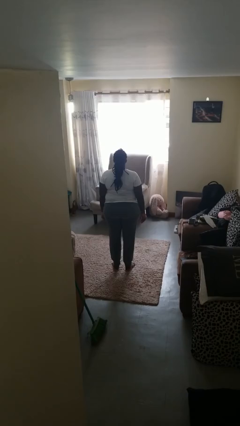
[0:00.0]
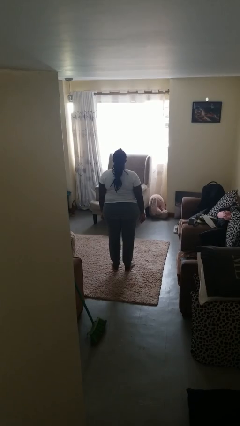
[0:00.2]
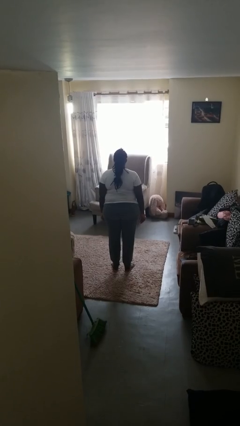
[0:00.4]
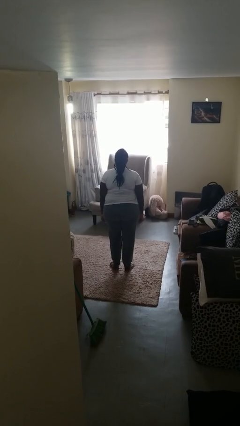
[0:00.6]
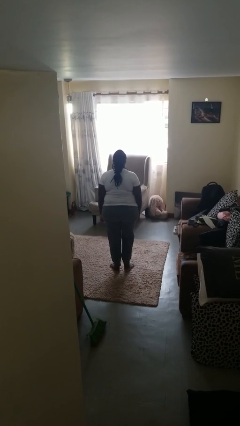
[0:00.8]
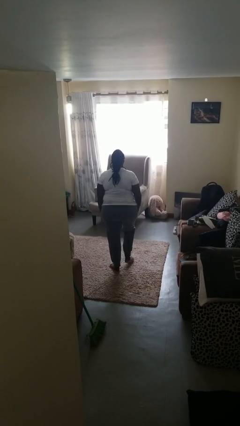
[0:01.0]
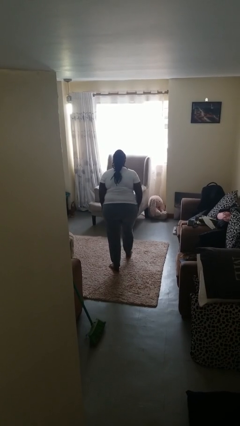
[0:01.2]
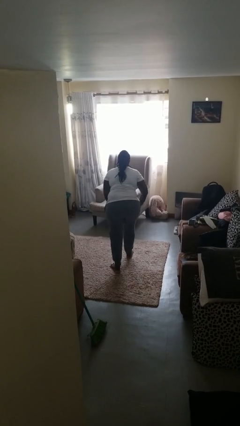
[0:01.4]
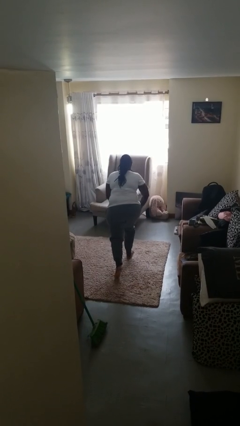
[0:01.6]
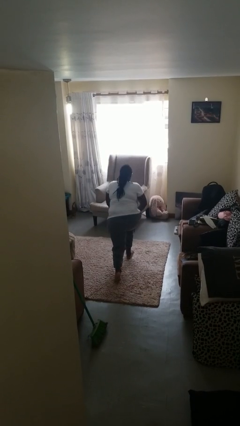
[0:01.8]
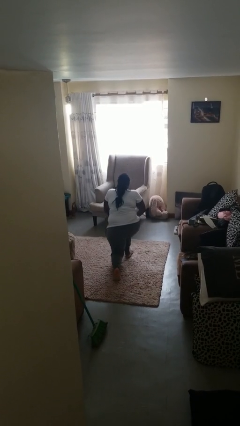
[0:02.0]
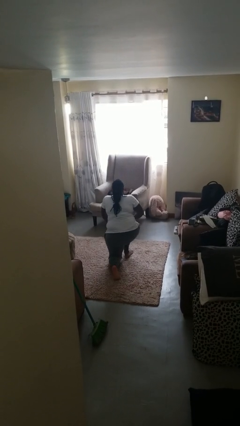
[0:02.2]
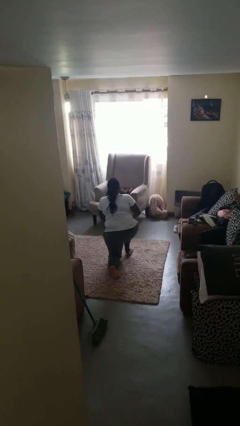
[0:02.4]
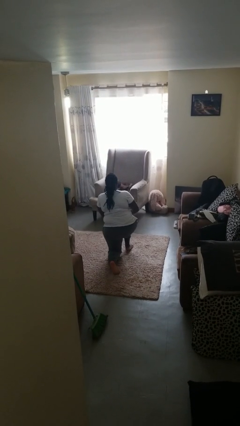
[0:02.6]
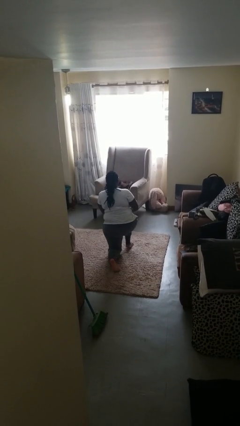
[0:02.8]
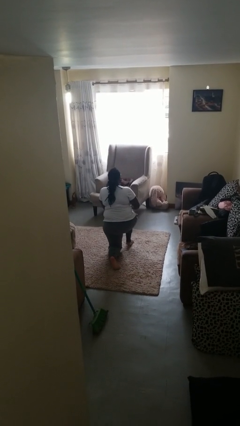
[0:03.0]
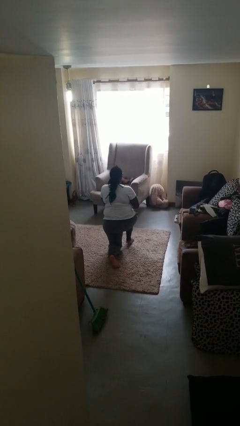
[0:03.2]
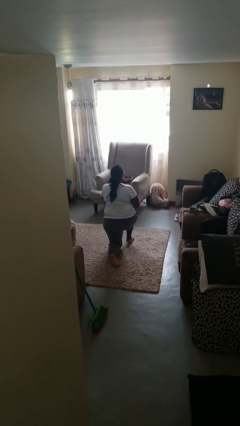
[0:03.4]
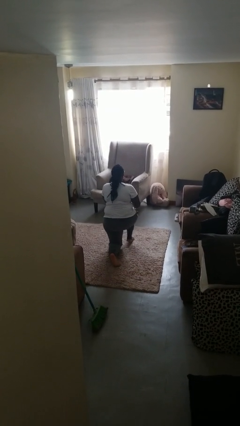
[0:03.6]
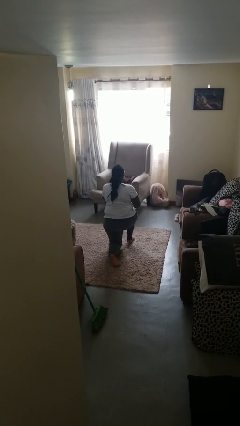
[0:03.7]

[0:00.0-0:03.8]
person kneels

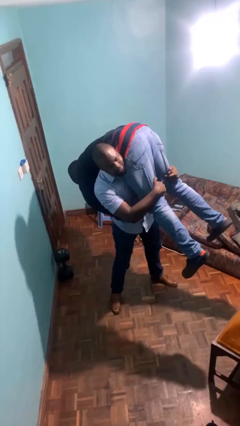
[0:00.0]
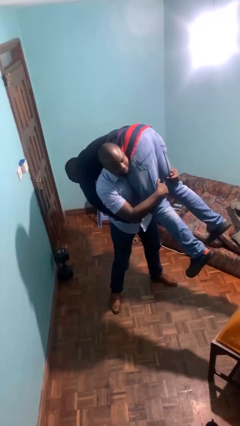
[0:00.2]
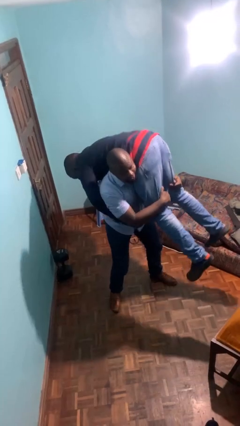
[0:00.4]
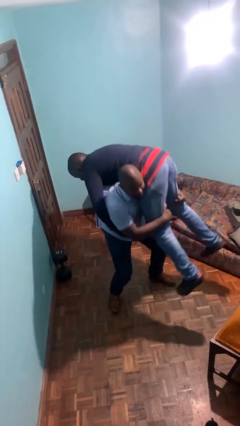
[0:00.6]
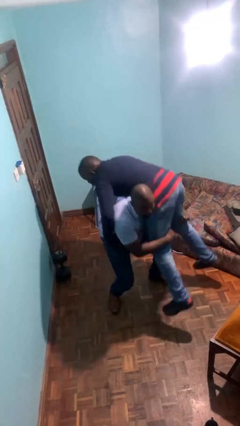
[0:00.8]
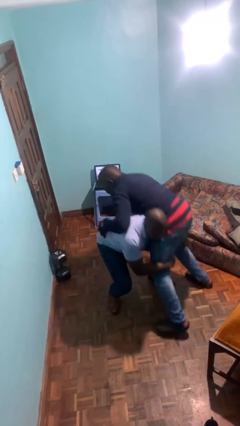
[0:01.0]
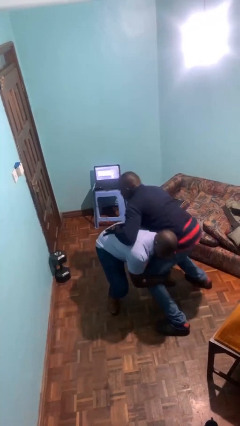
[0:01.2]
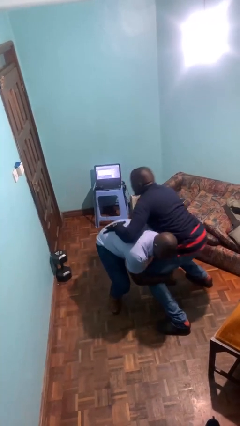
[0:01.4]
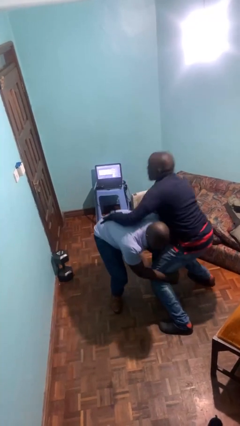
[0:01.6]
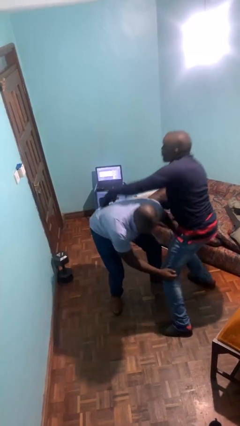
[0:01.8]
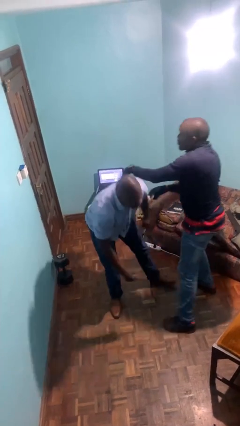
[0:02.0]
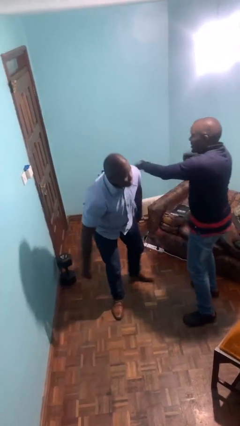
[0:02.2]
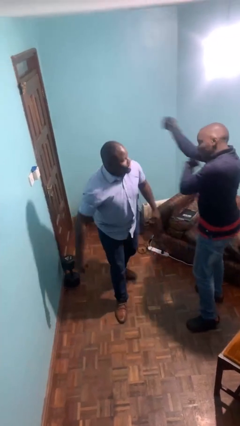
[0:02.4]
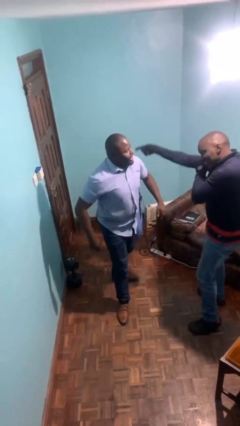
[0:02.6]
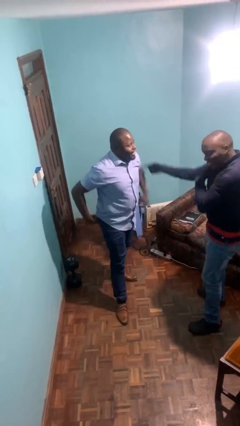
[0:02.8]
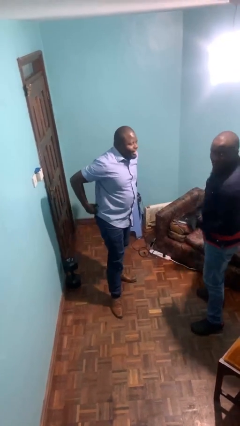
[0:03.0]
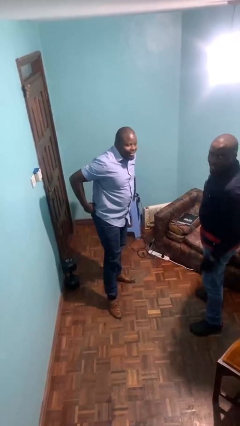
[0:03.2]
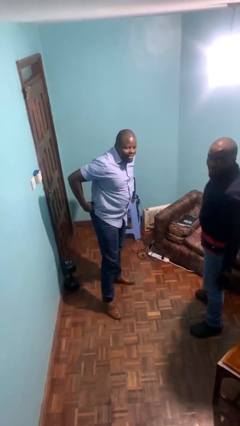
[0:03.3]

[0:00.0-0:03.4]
person puts down person

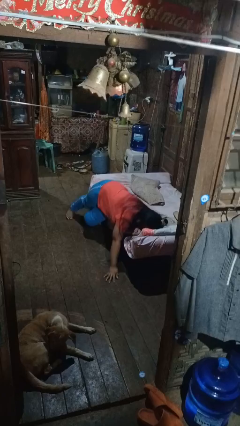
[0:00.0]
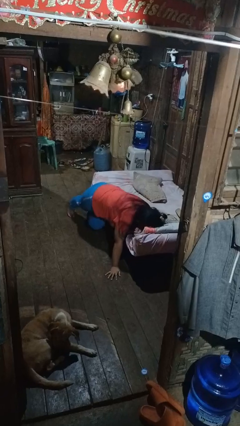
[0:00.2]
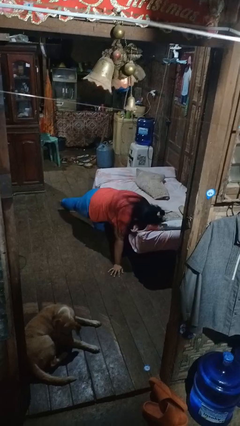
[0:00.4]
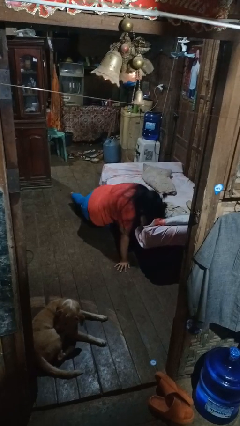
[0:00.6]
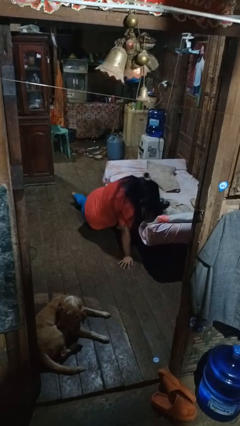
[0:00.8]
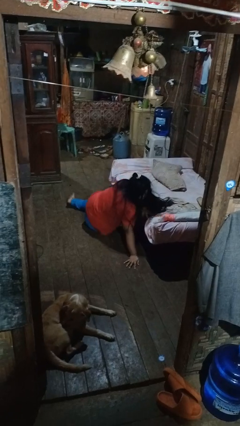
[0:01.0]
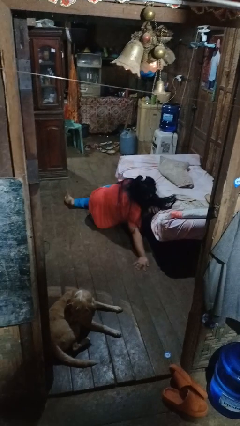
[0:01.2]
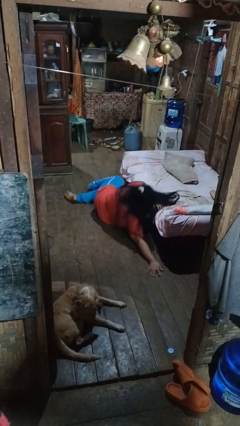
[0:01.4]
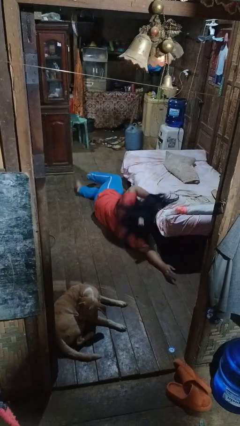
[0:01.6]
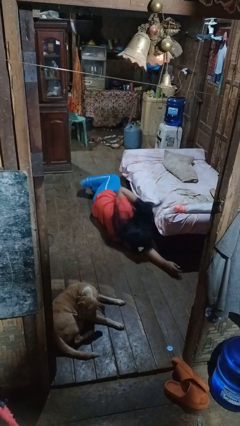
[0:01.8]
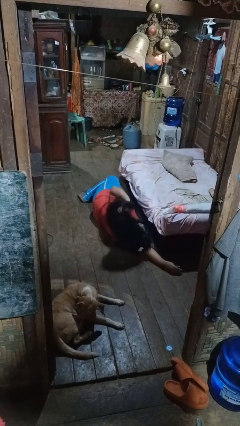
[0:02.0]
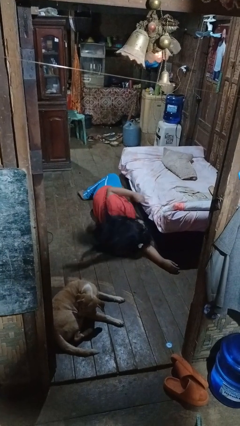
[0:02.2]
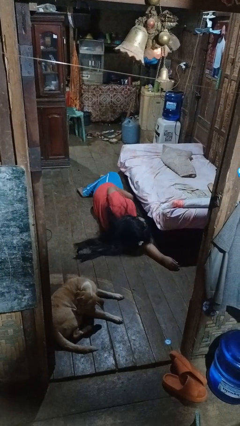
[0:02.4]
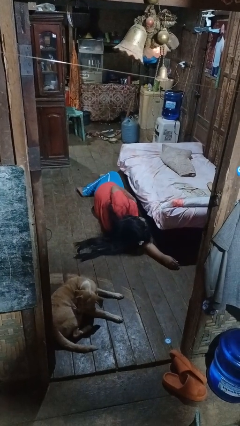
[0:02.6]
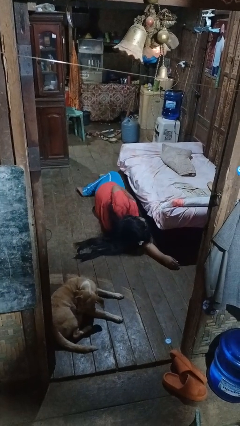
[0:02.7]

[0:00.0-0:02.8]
person falls from bed

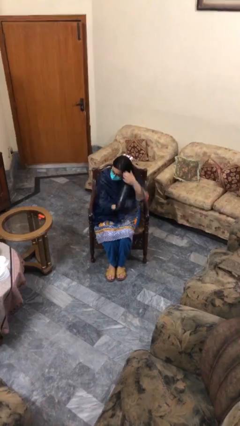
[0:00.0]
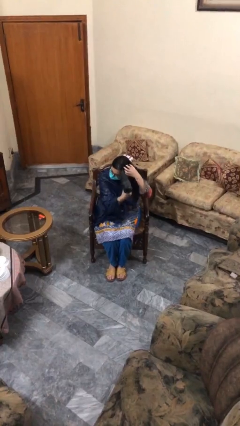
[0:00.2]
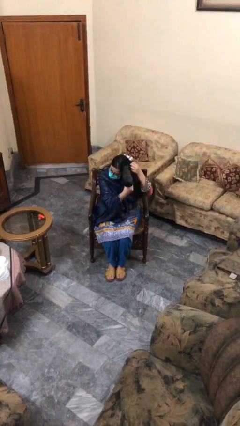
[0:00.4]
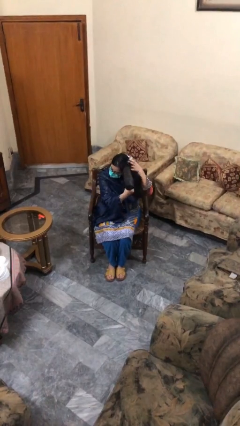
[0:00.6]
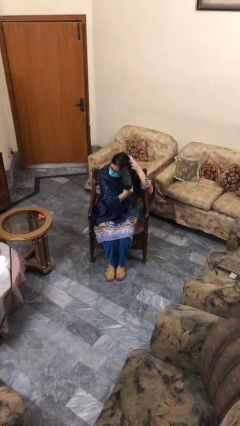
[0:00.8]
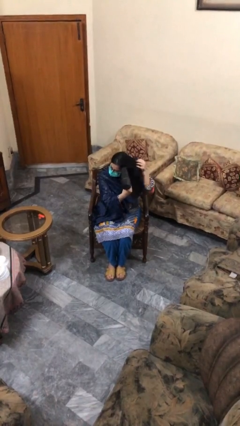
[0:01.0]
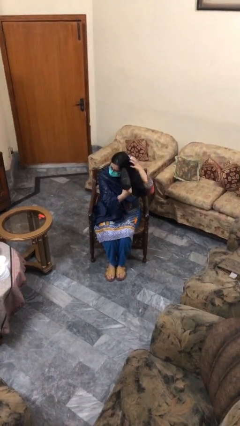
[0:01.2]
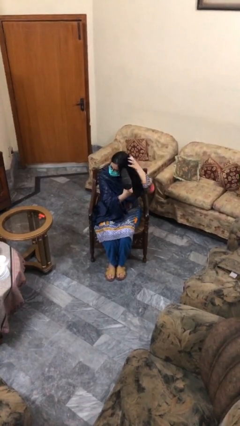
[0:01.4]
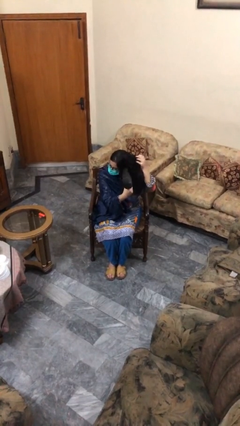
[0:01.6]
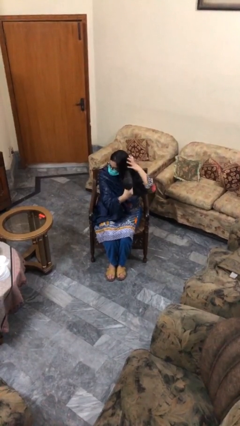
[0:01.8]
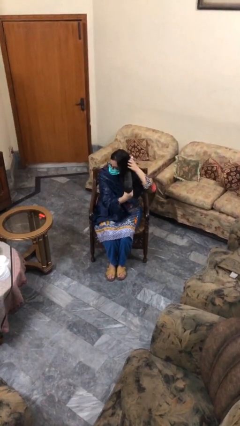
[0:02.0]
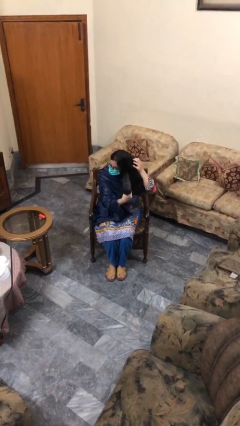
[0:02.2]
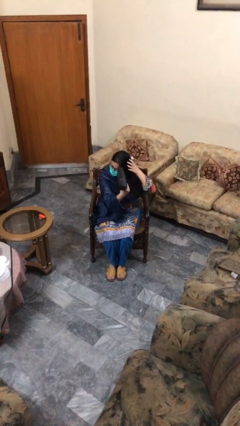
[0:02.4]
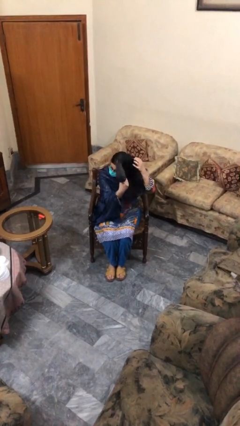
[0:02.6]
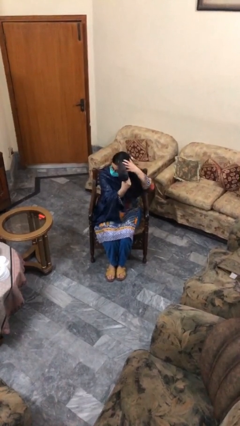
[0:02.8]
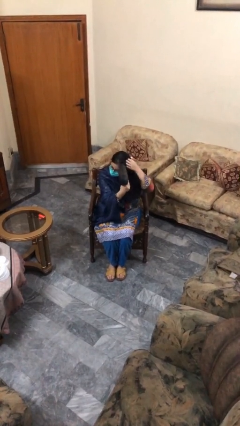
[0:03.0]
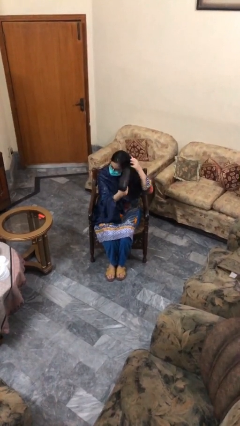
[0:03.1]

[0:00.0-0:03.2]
person dries hair with hairdryer

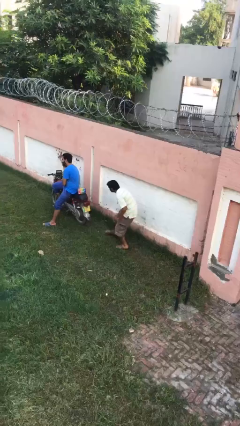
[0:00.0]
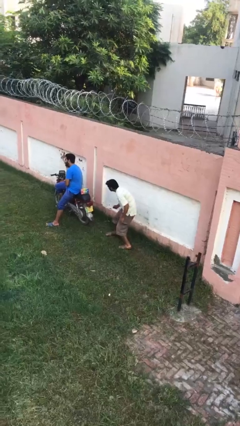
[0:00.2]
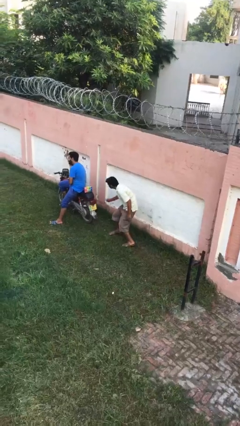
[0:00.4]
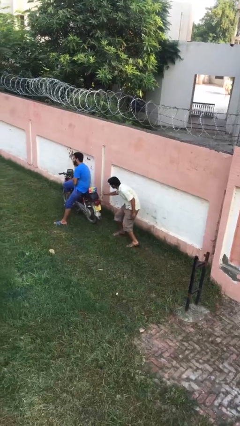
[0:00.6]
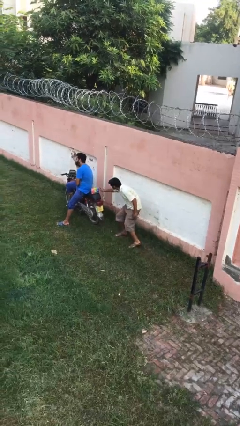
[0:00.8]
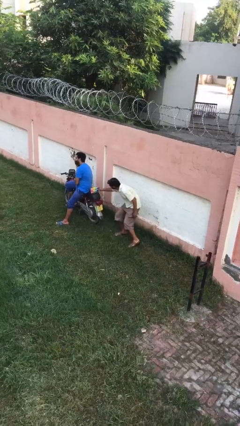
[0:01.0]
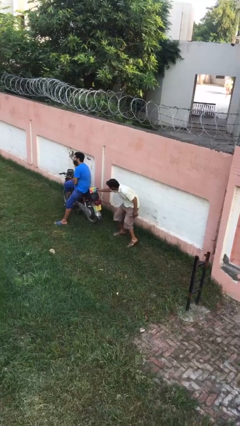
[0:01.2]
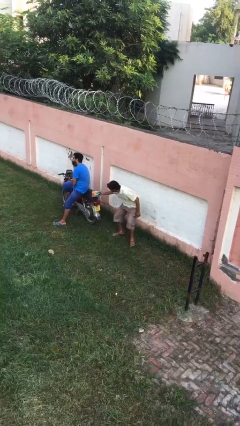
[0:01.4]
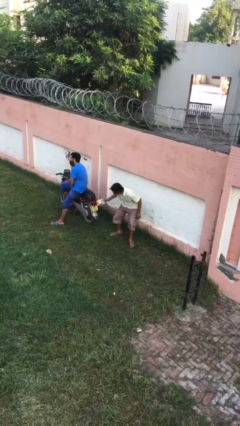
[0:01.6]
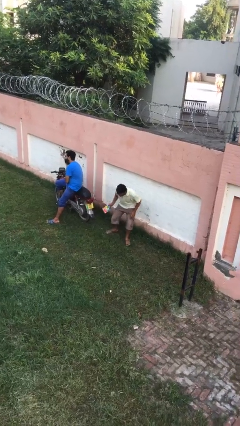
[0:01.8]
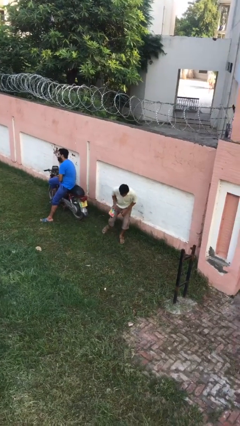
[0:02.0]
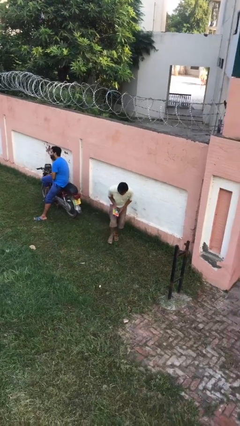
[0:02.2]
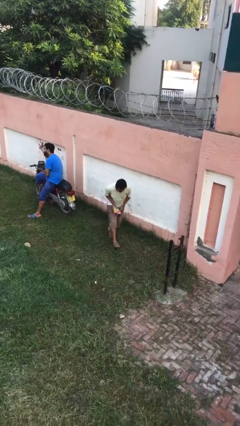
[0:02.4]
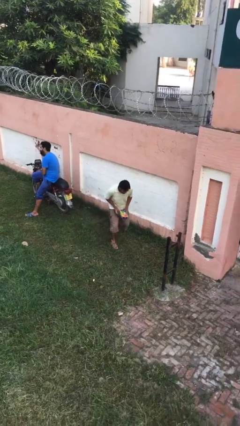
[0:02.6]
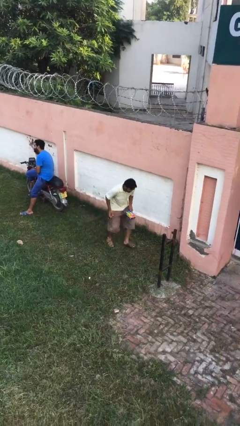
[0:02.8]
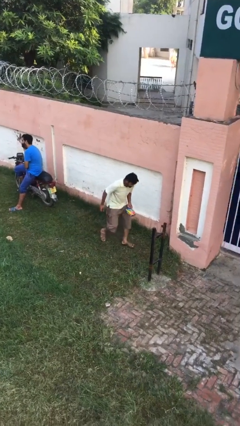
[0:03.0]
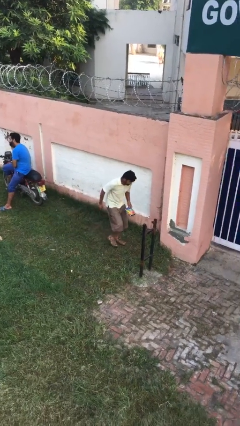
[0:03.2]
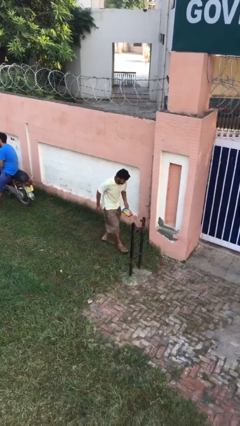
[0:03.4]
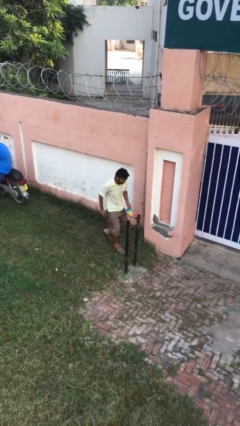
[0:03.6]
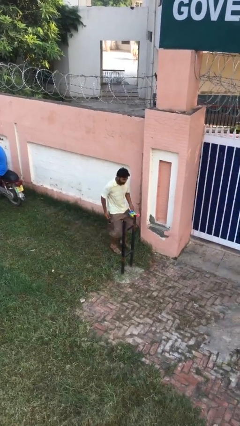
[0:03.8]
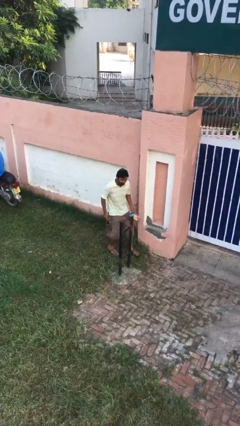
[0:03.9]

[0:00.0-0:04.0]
person steals object from person

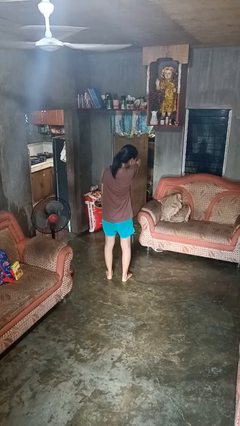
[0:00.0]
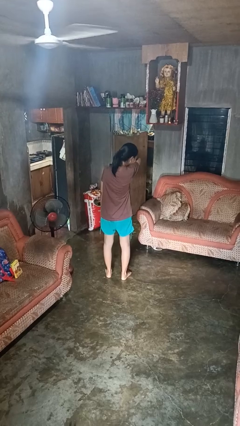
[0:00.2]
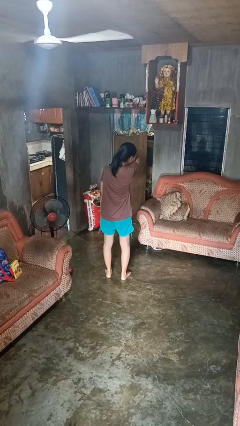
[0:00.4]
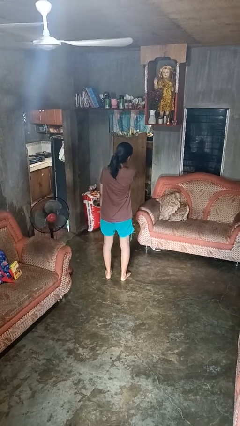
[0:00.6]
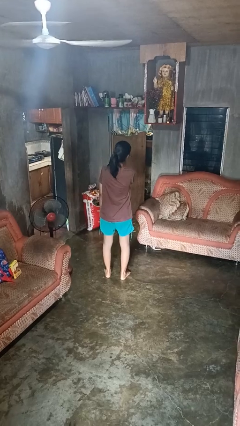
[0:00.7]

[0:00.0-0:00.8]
person sneezes into arm
